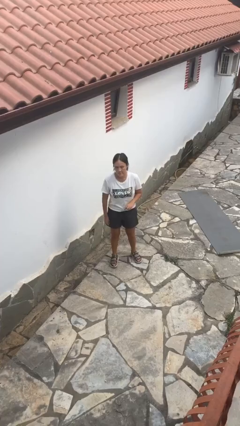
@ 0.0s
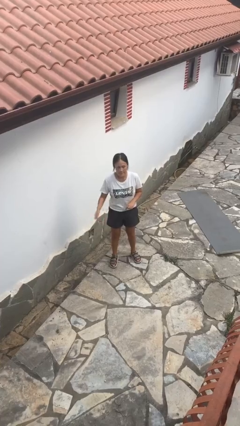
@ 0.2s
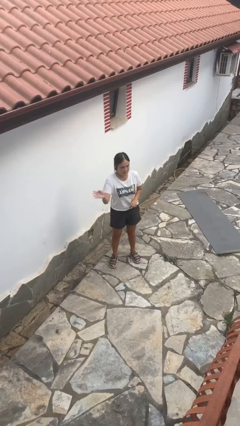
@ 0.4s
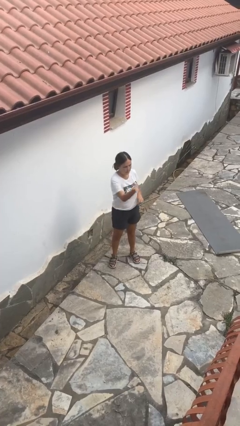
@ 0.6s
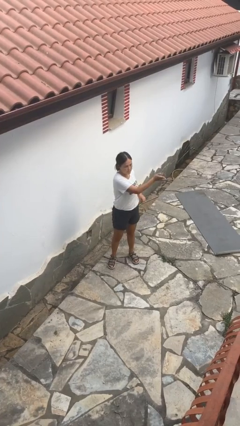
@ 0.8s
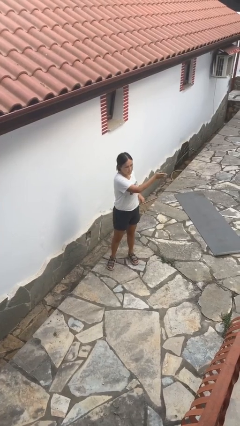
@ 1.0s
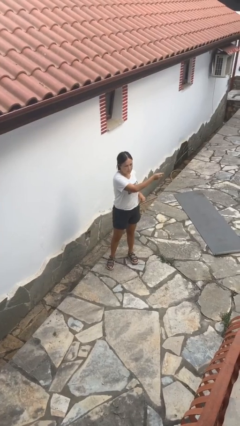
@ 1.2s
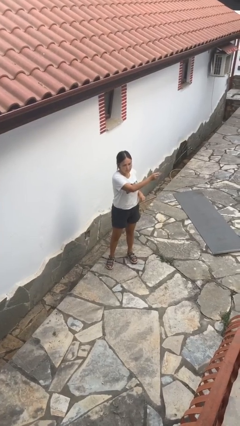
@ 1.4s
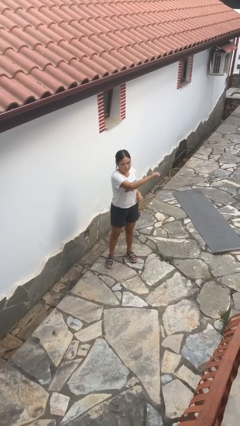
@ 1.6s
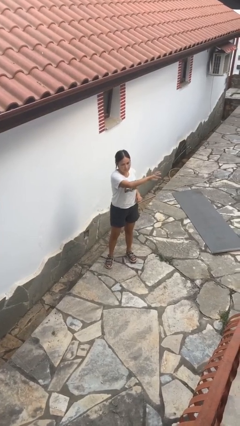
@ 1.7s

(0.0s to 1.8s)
person gestures swipe left

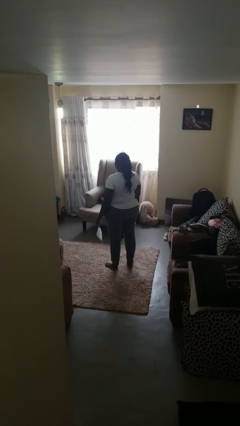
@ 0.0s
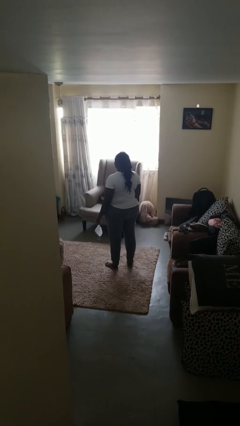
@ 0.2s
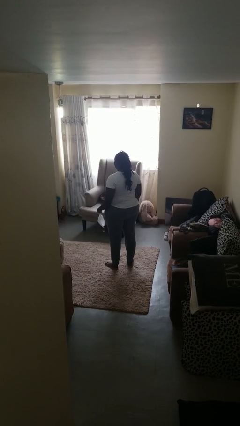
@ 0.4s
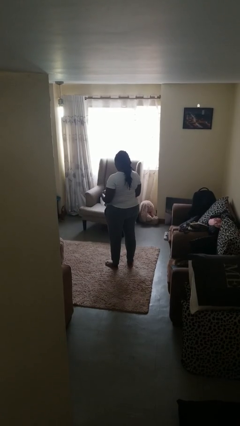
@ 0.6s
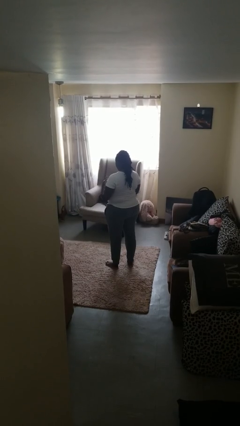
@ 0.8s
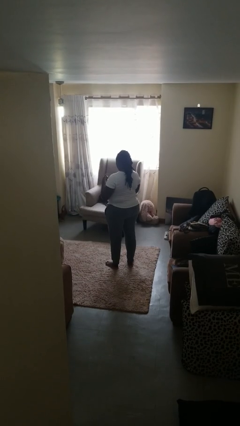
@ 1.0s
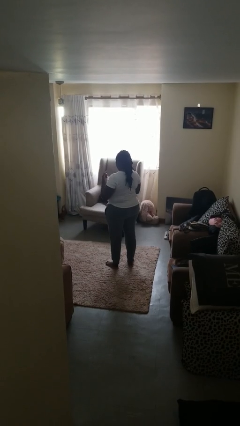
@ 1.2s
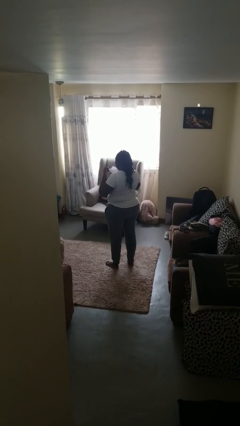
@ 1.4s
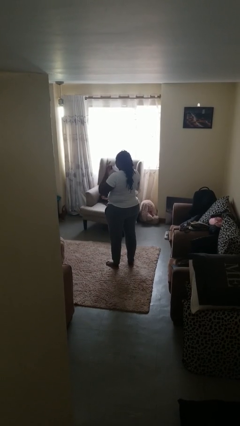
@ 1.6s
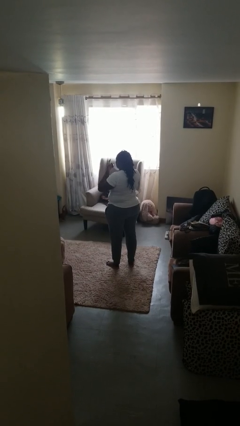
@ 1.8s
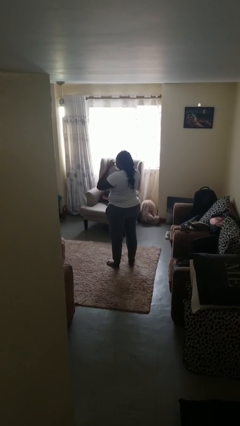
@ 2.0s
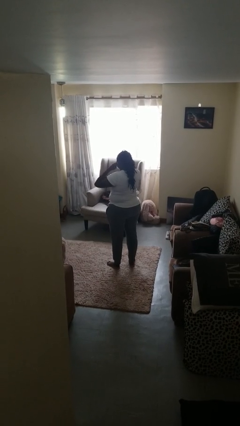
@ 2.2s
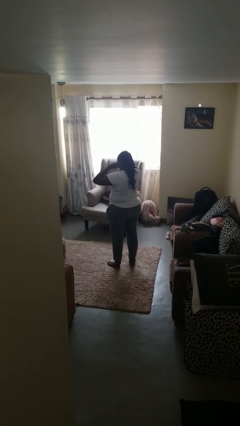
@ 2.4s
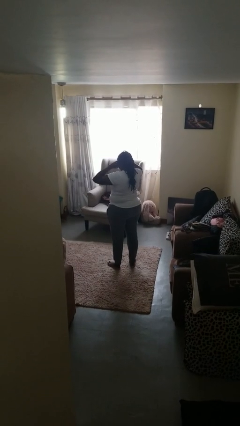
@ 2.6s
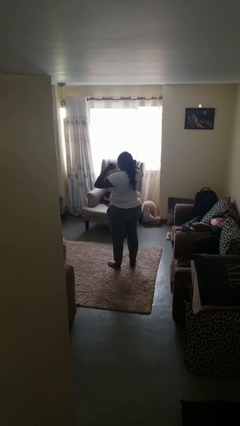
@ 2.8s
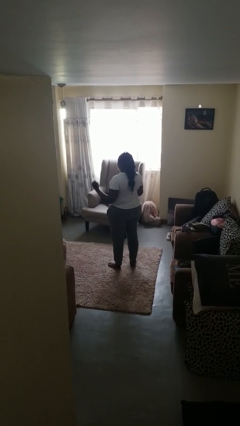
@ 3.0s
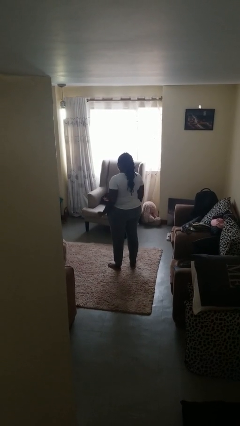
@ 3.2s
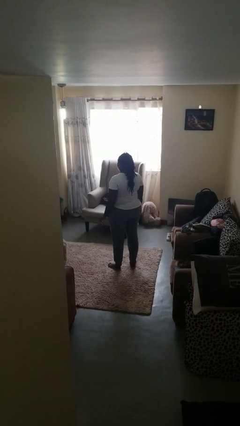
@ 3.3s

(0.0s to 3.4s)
person puts on facemask

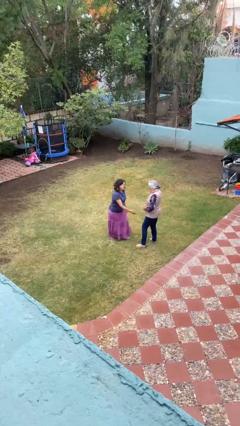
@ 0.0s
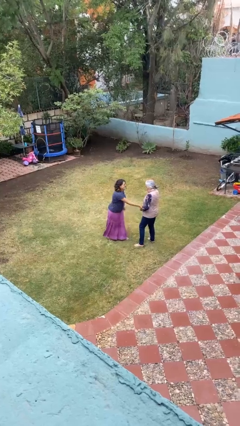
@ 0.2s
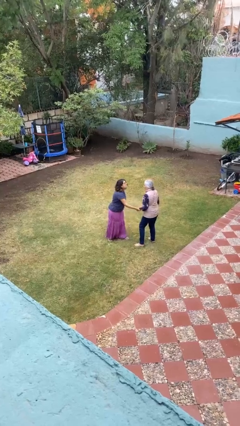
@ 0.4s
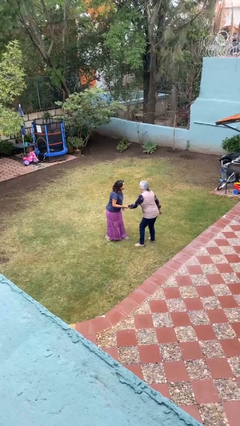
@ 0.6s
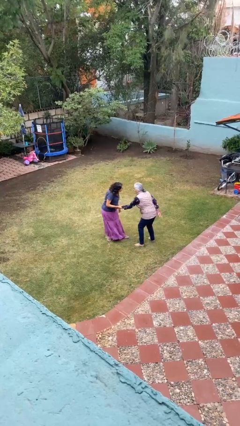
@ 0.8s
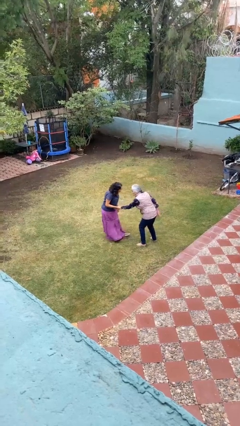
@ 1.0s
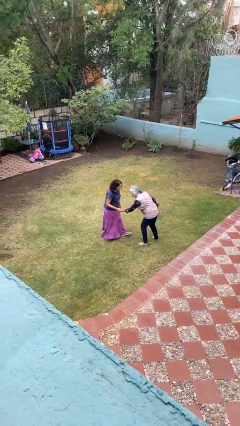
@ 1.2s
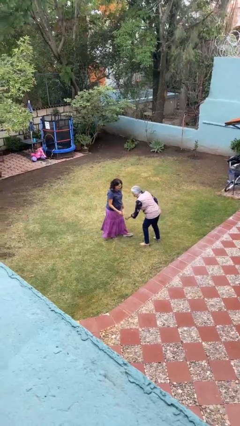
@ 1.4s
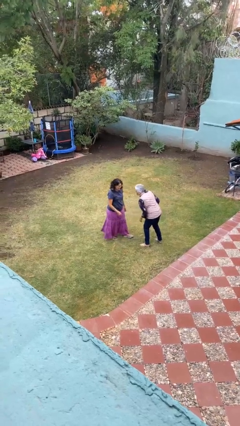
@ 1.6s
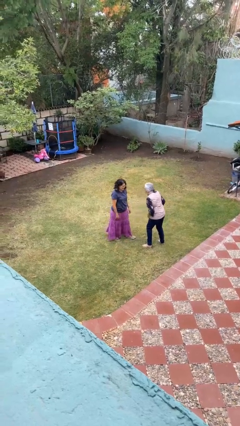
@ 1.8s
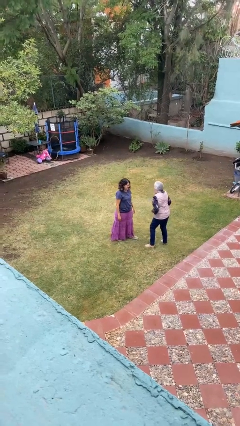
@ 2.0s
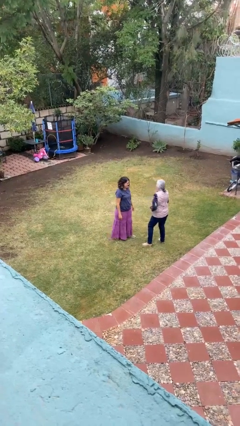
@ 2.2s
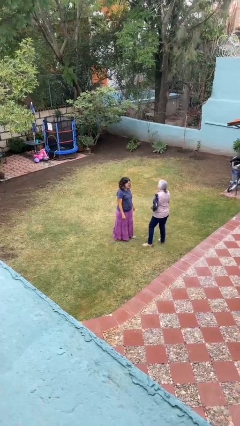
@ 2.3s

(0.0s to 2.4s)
person grabs person by forearm

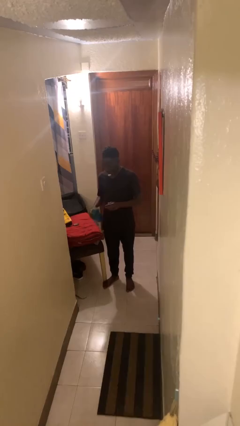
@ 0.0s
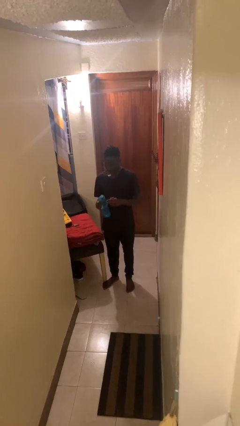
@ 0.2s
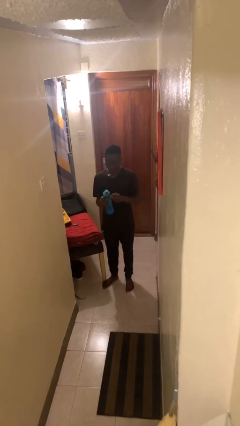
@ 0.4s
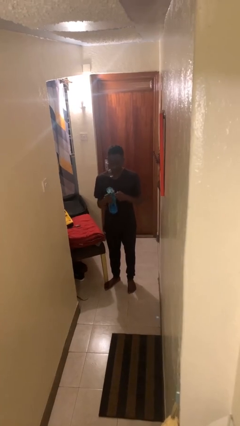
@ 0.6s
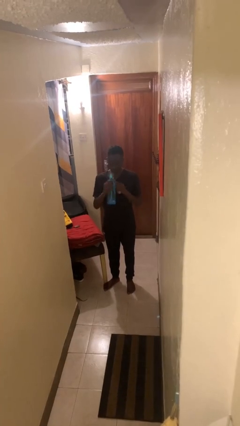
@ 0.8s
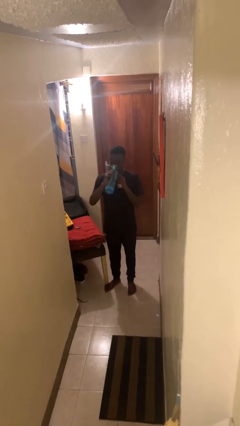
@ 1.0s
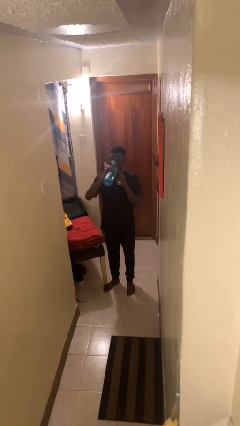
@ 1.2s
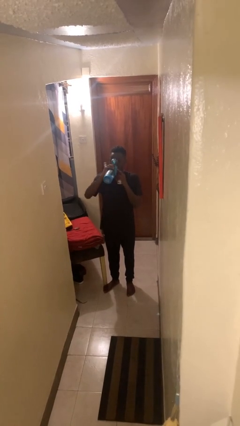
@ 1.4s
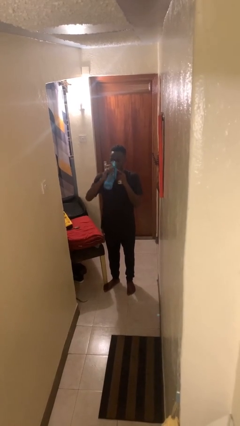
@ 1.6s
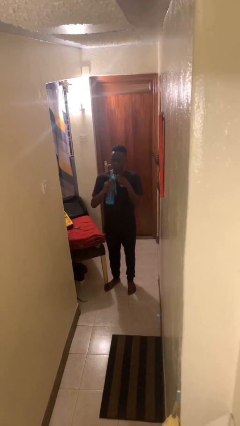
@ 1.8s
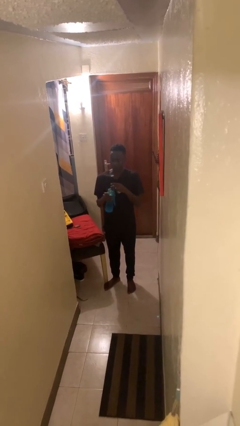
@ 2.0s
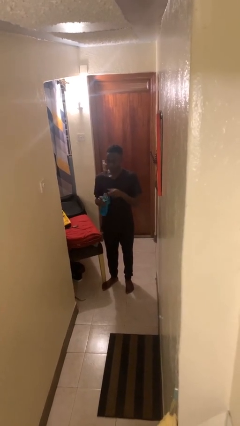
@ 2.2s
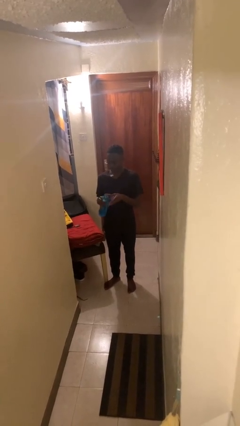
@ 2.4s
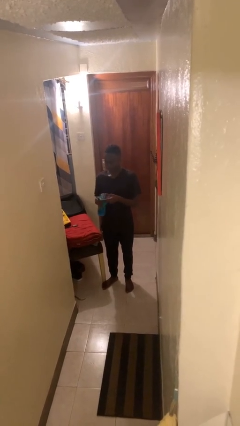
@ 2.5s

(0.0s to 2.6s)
person drinks from cup

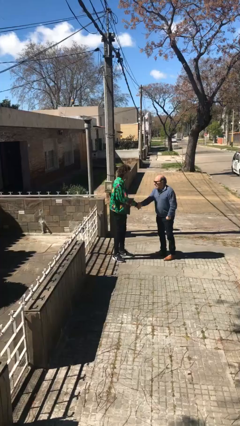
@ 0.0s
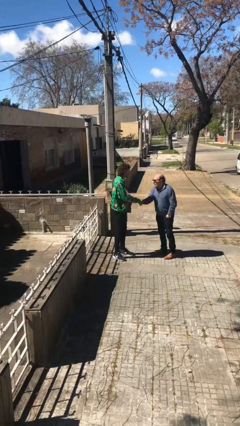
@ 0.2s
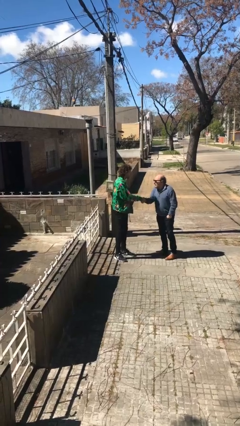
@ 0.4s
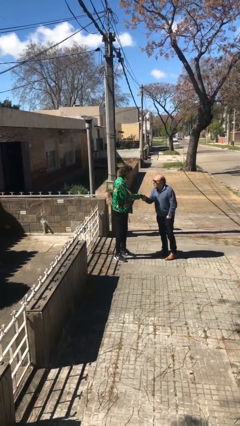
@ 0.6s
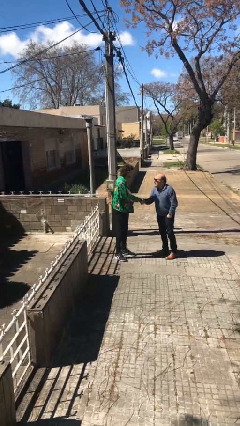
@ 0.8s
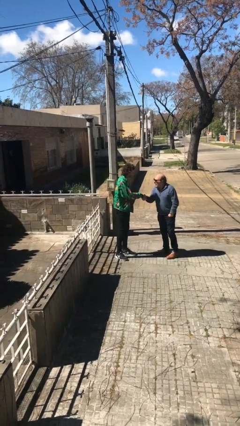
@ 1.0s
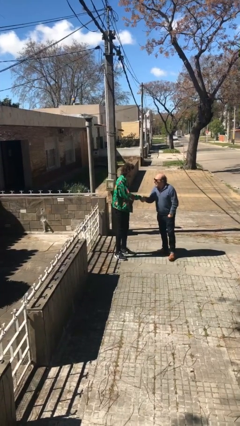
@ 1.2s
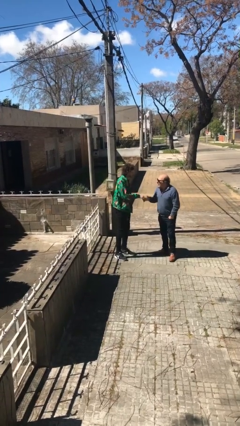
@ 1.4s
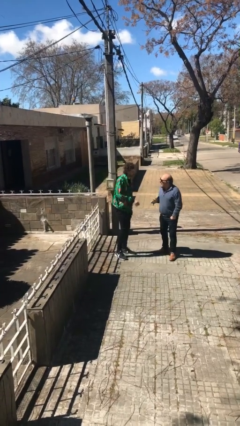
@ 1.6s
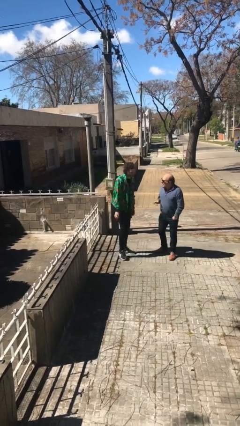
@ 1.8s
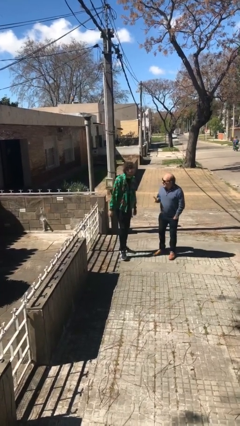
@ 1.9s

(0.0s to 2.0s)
person shakes hand

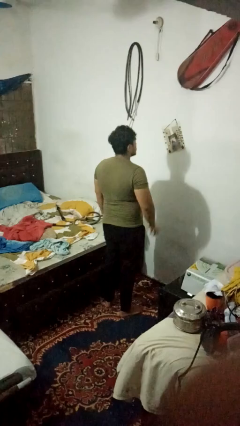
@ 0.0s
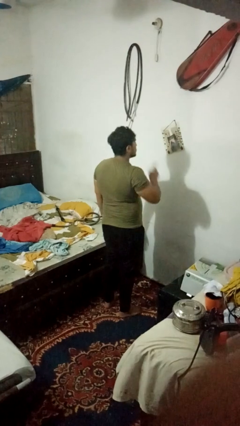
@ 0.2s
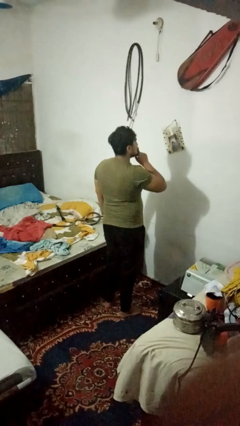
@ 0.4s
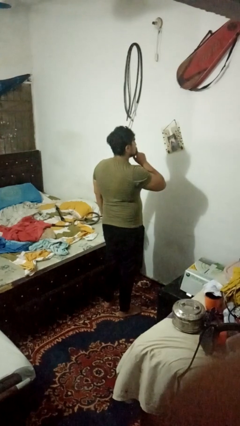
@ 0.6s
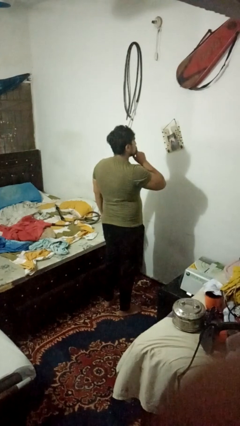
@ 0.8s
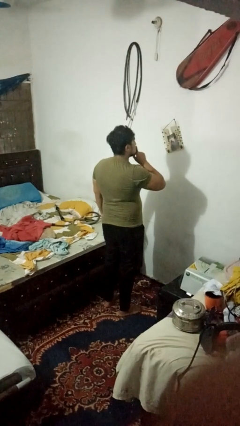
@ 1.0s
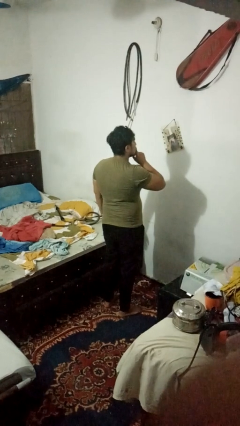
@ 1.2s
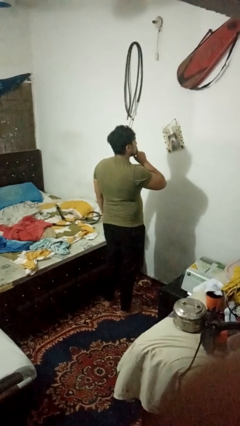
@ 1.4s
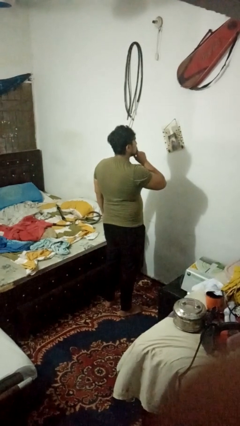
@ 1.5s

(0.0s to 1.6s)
person gestures be quiet

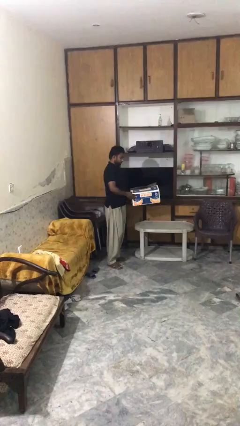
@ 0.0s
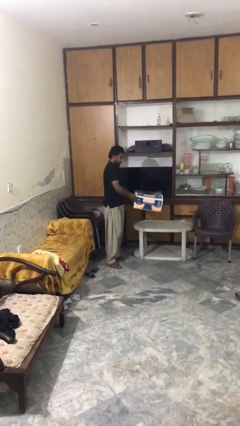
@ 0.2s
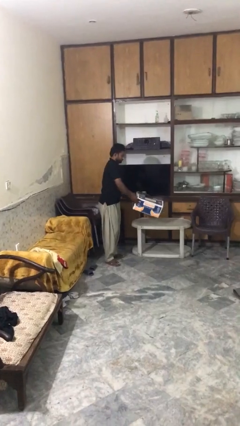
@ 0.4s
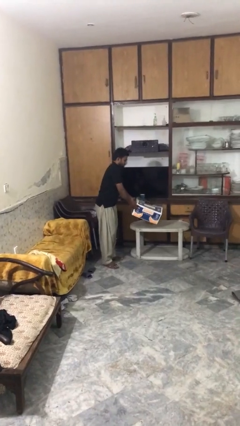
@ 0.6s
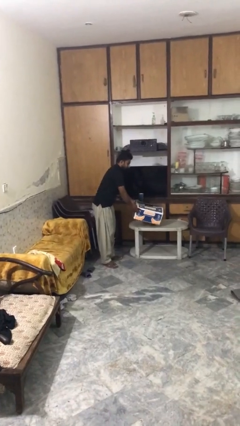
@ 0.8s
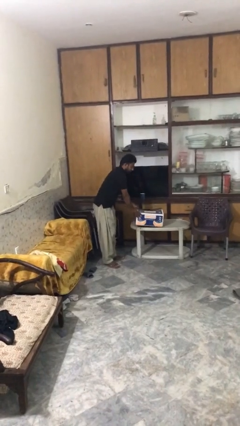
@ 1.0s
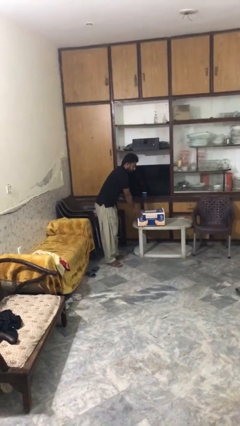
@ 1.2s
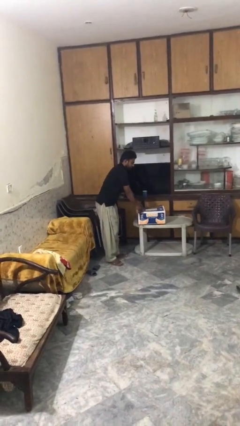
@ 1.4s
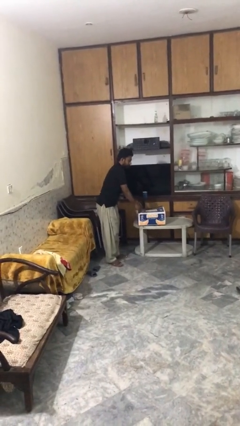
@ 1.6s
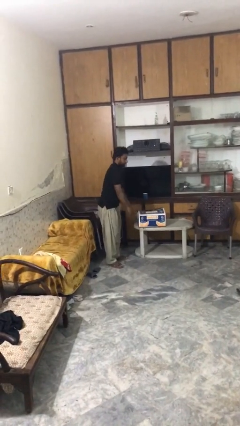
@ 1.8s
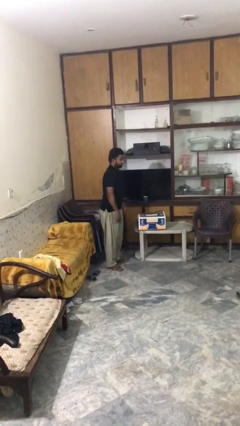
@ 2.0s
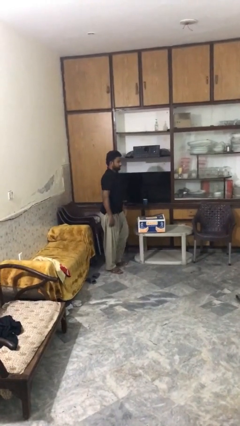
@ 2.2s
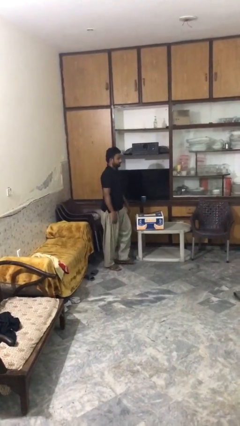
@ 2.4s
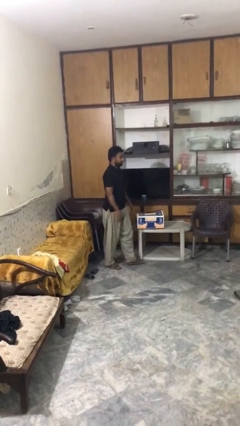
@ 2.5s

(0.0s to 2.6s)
person puts down object on table

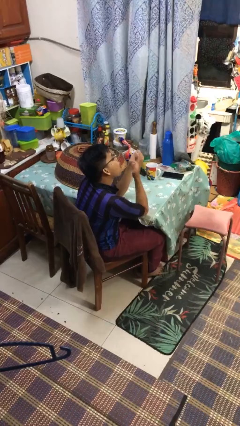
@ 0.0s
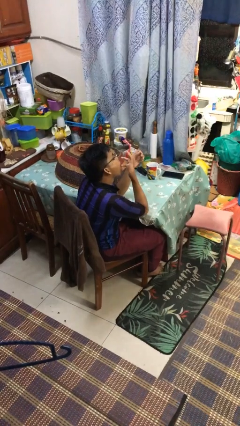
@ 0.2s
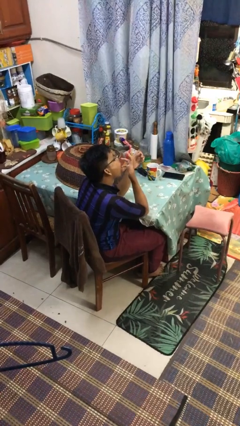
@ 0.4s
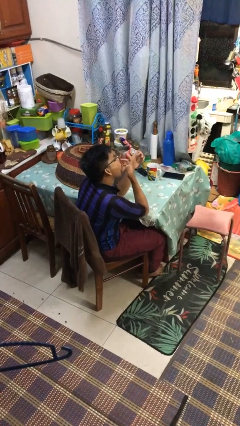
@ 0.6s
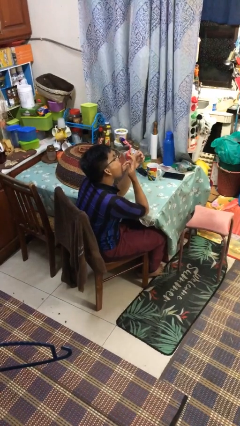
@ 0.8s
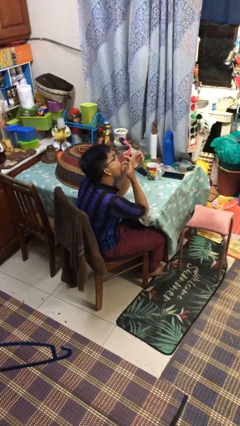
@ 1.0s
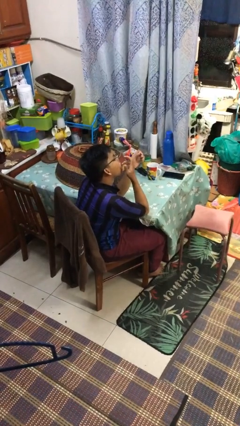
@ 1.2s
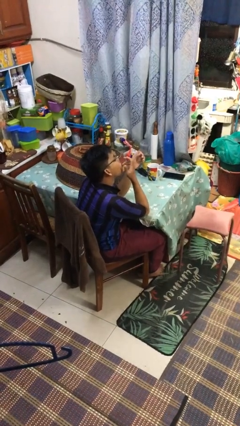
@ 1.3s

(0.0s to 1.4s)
person licks fingers
